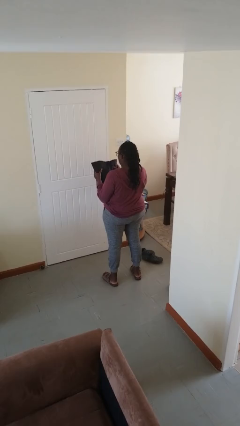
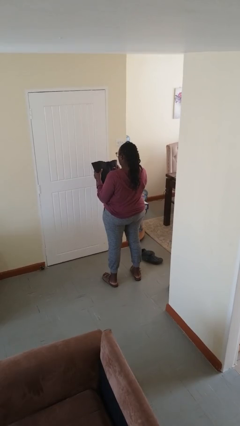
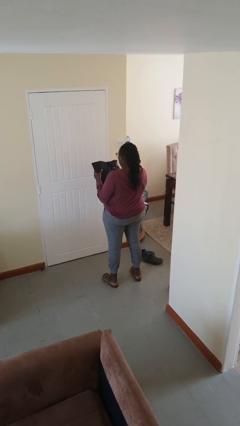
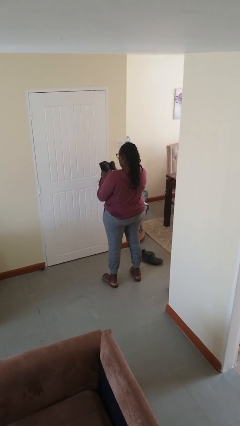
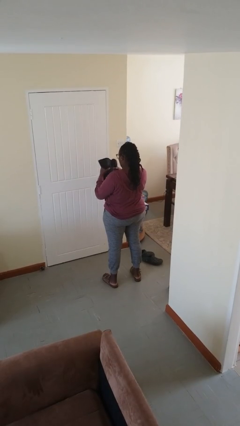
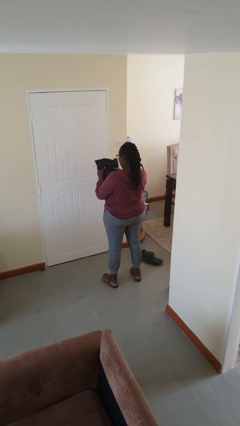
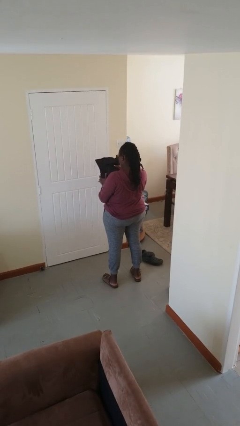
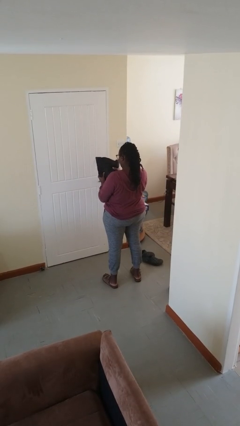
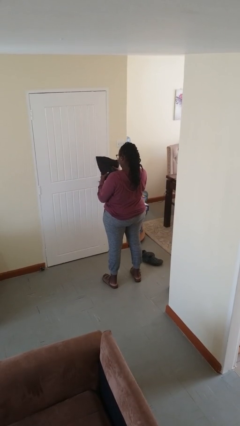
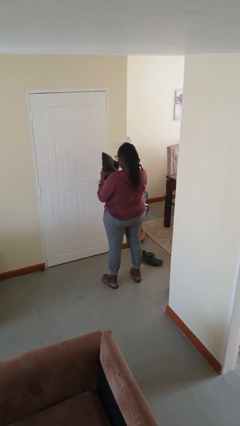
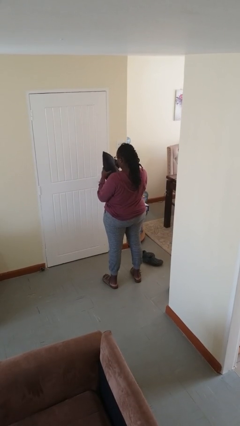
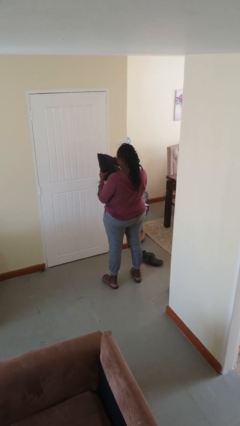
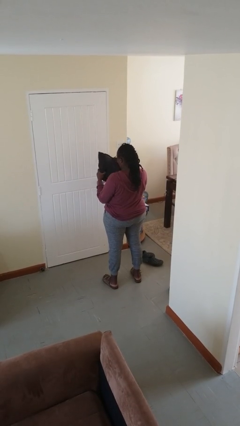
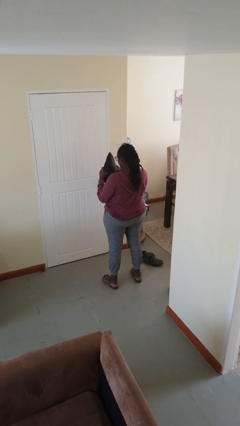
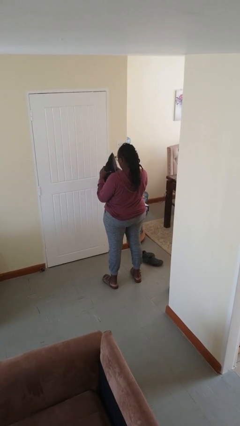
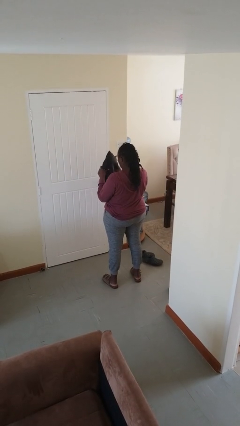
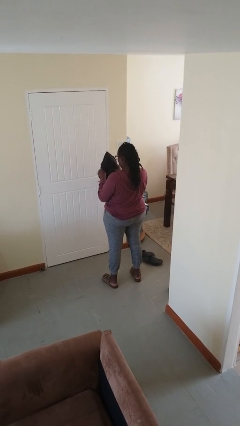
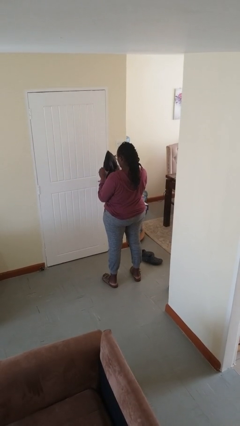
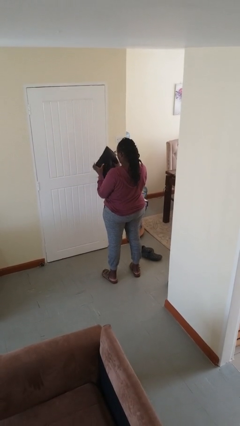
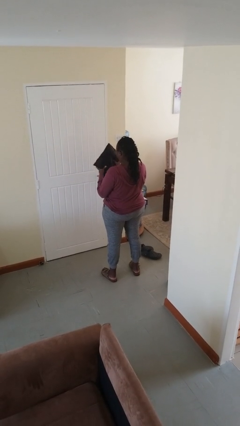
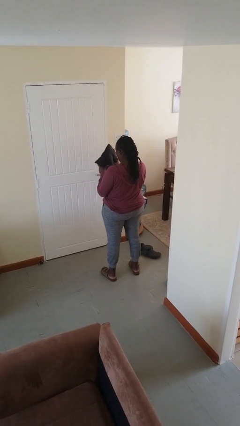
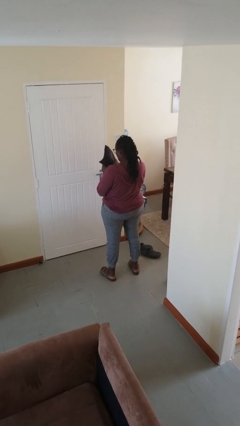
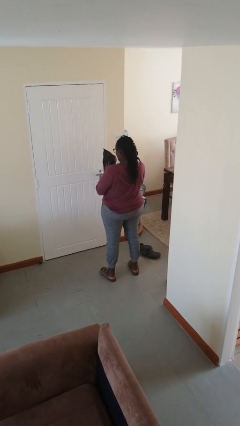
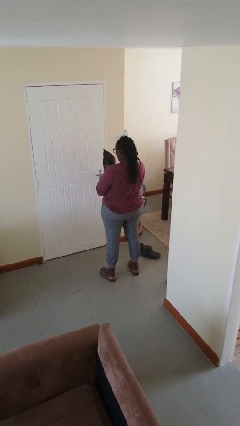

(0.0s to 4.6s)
person squeezes object

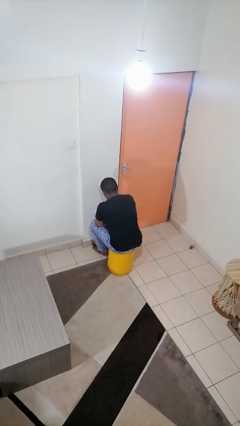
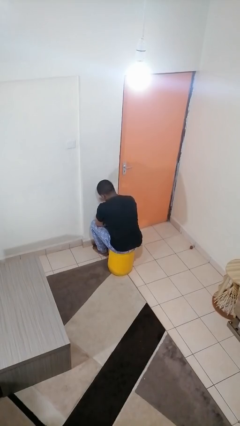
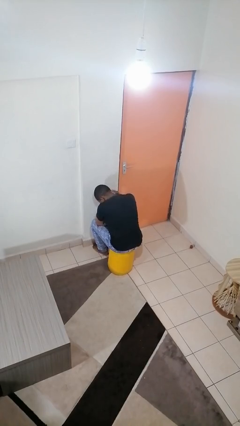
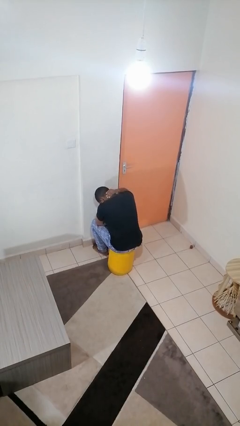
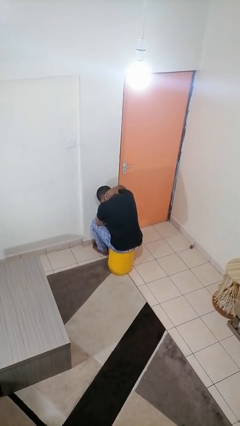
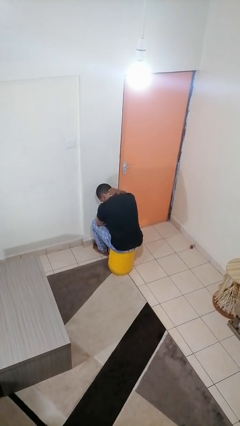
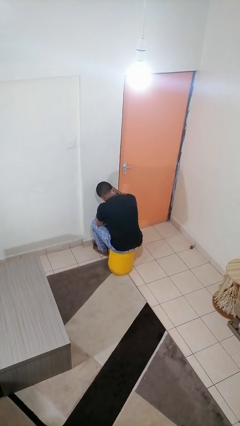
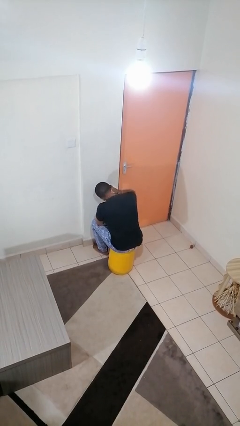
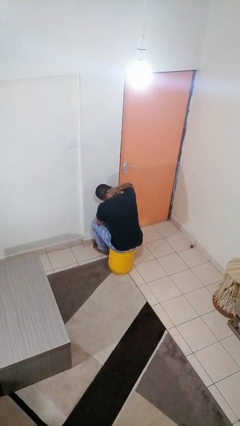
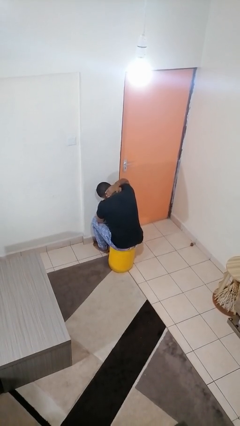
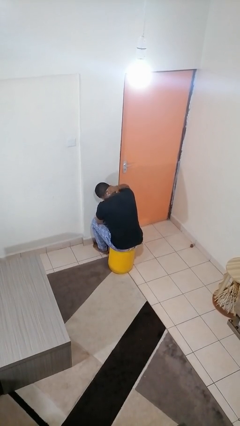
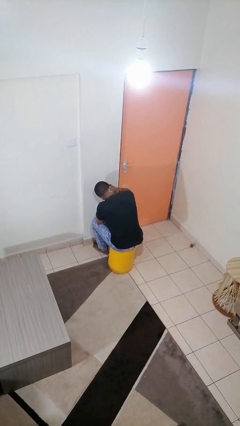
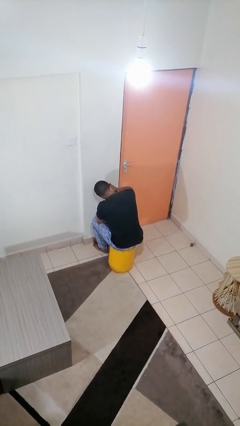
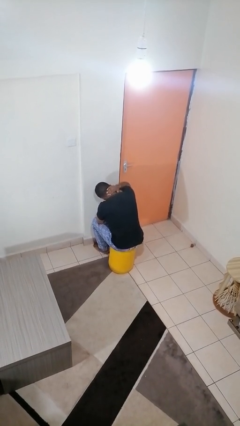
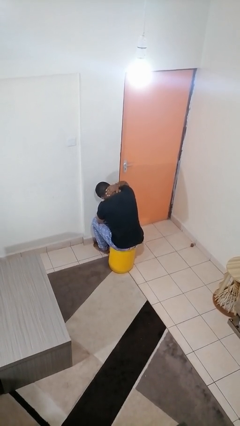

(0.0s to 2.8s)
person rubs neck

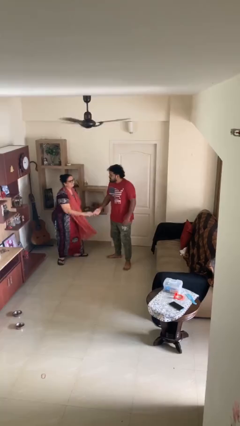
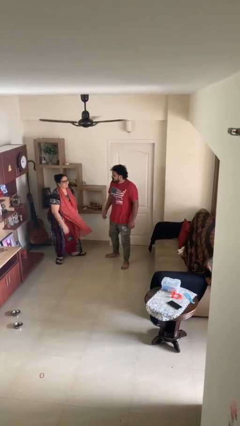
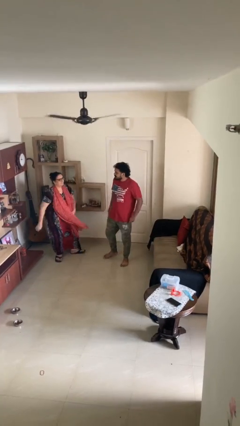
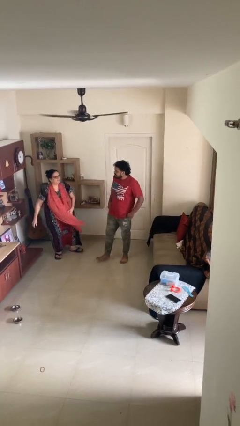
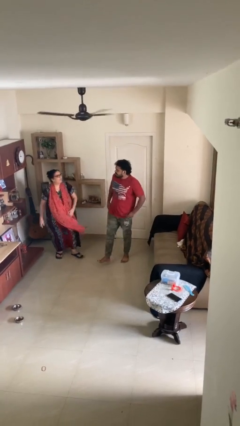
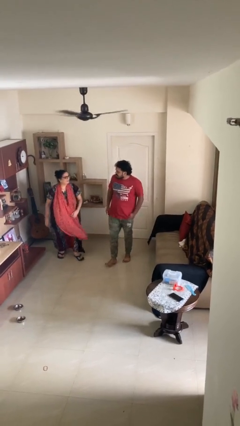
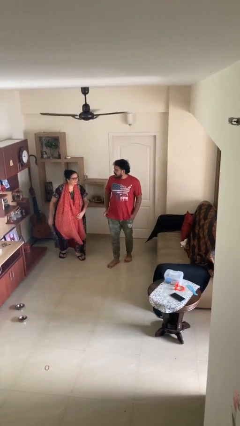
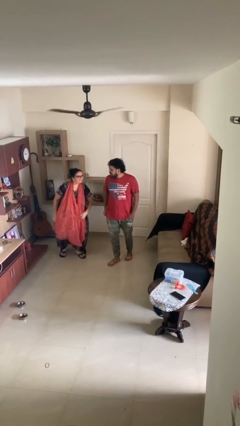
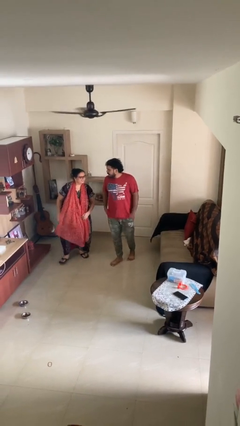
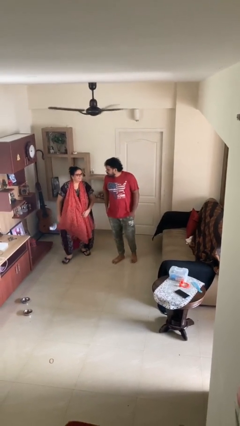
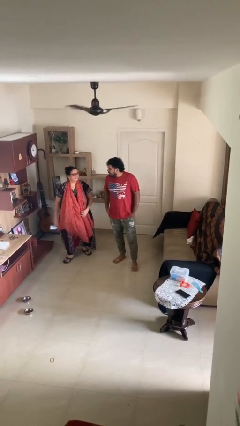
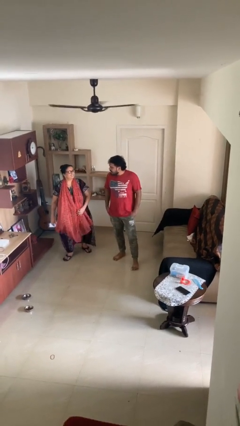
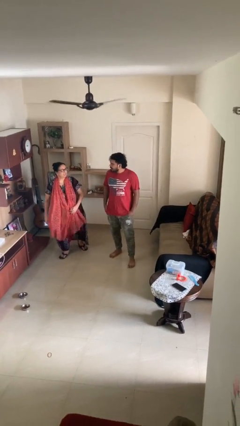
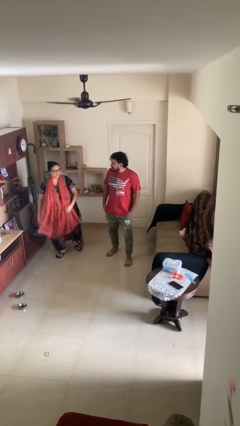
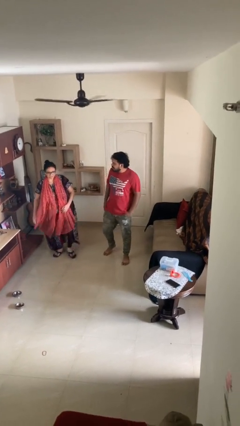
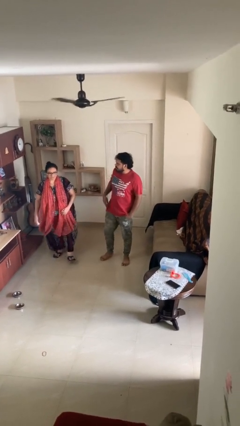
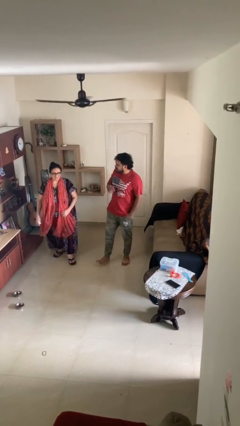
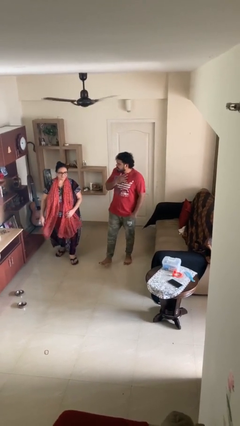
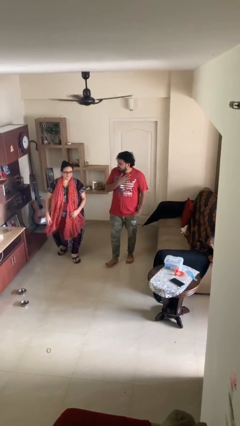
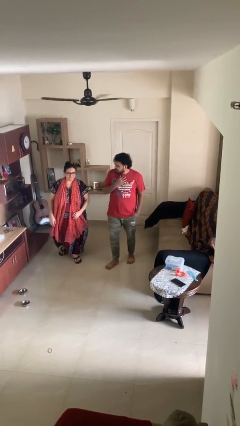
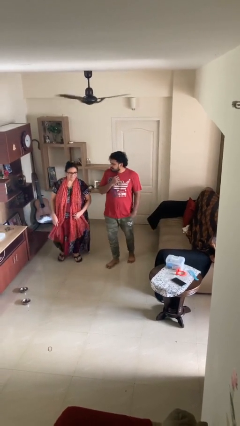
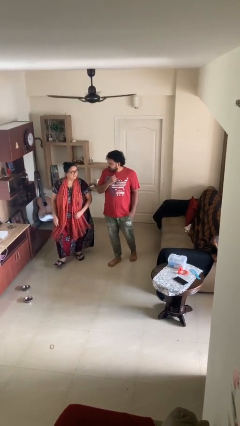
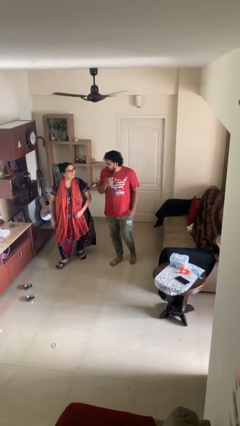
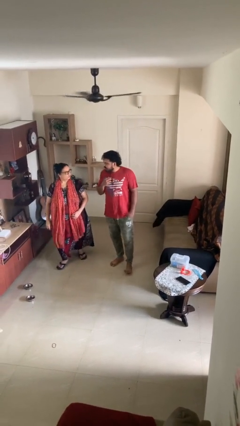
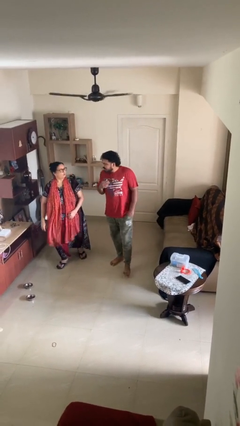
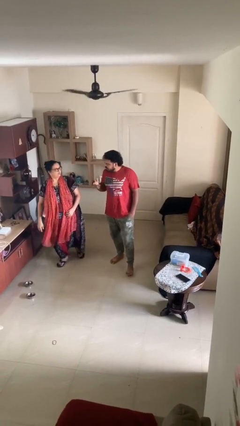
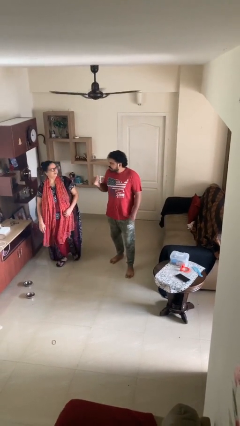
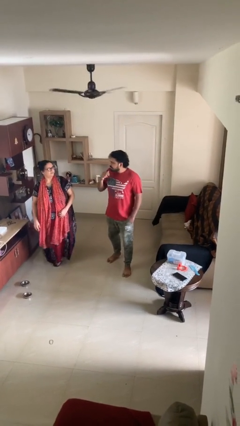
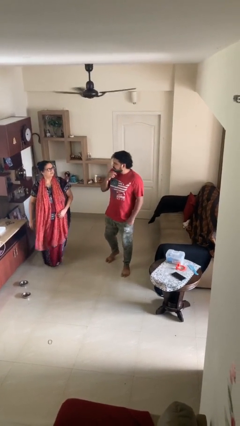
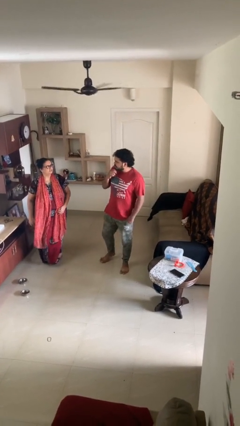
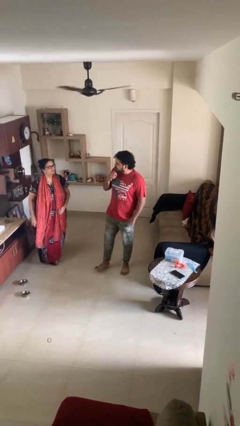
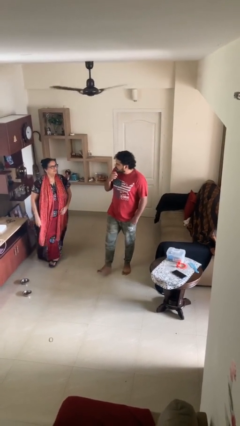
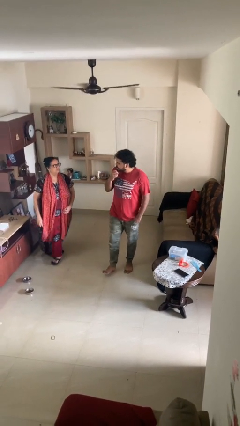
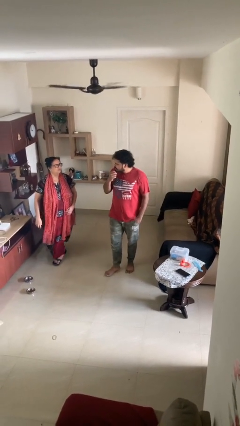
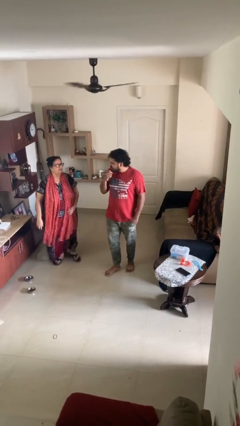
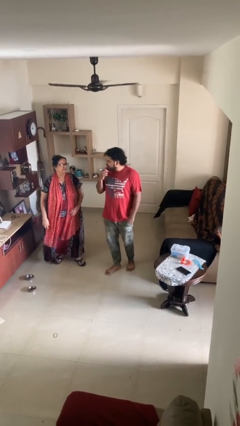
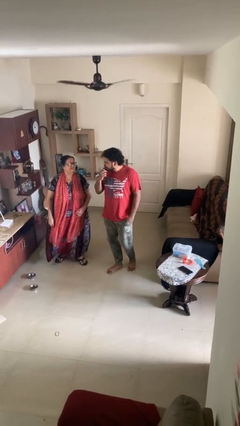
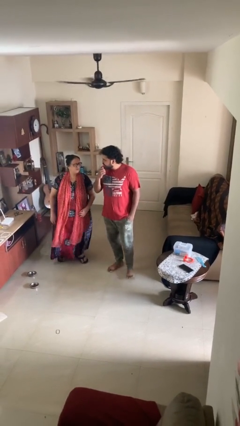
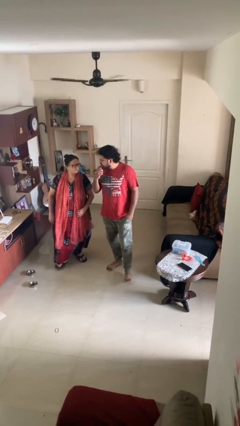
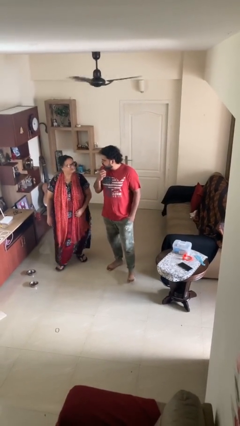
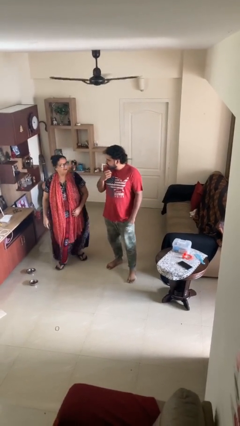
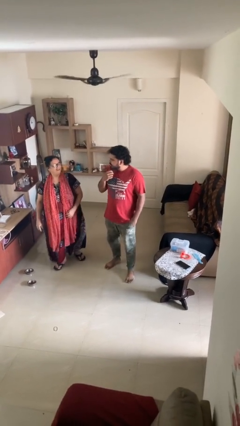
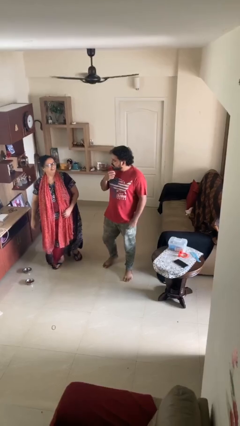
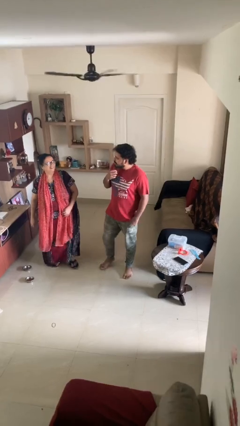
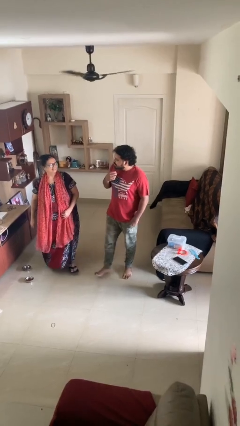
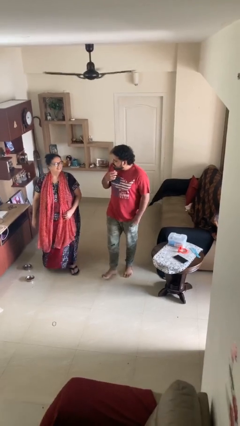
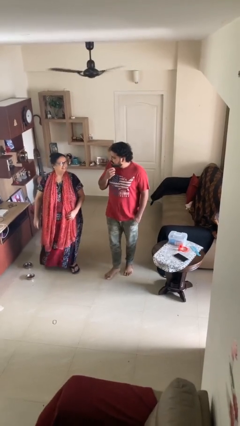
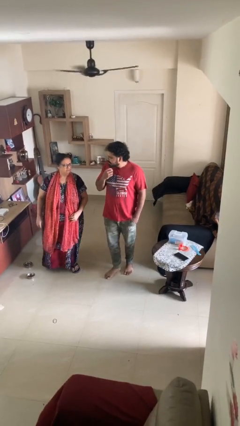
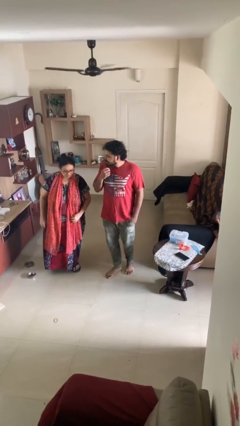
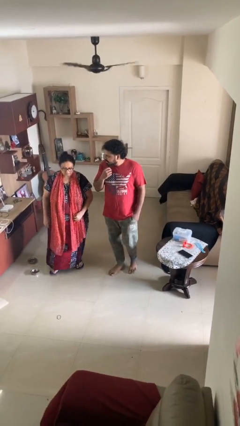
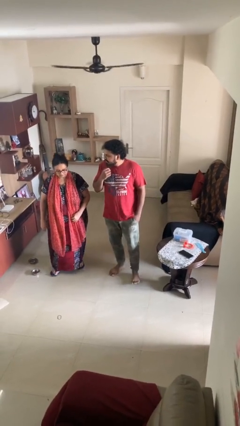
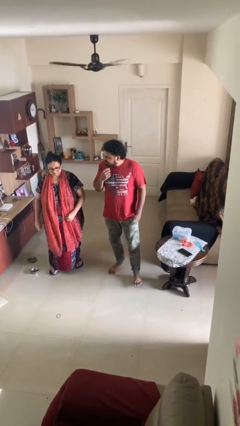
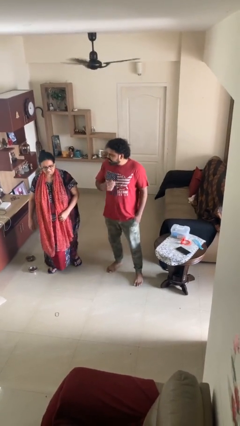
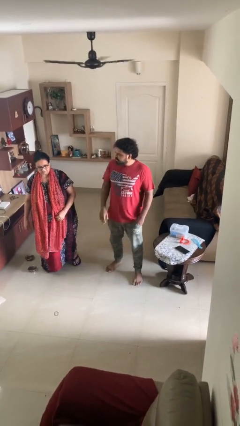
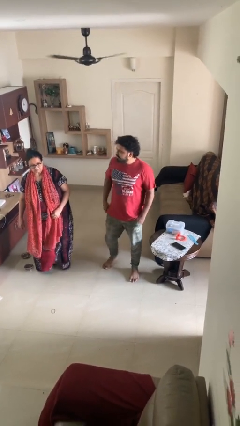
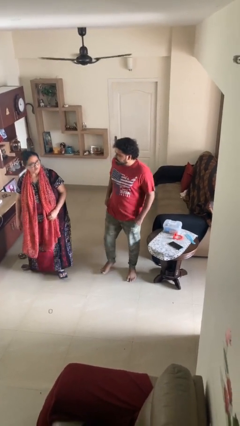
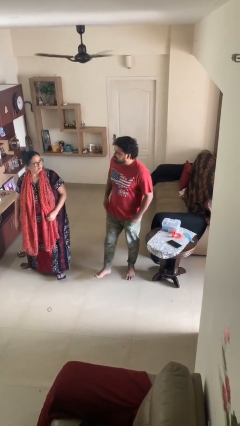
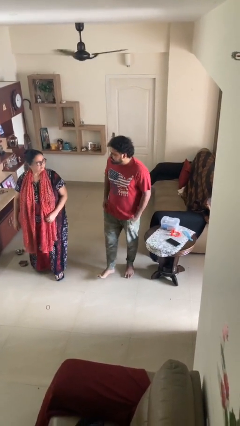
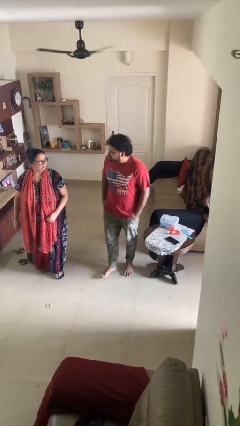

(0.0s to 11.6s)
person talks to person
